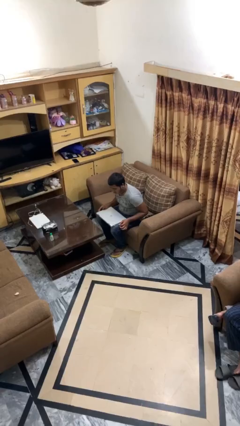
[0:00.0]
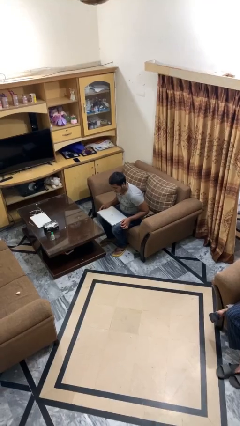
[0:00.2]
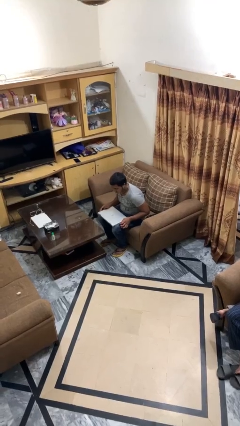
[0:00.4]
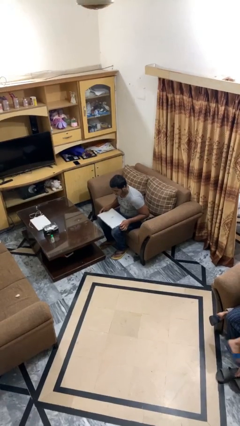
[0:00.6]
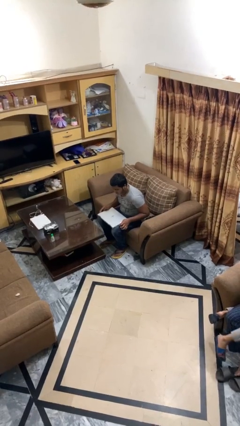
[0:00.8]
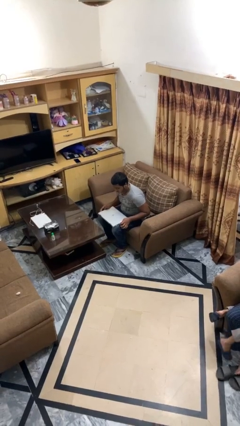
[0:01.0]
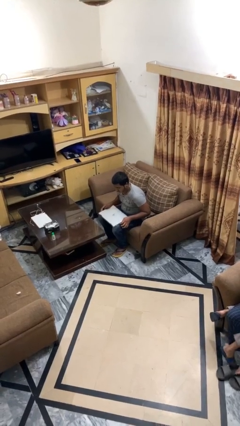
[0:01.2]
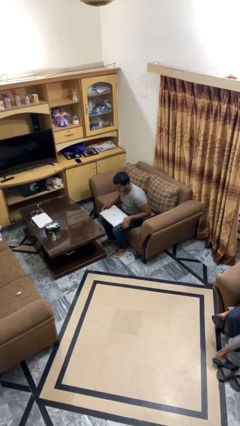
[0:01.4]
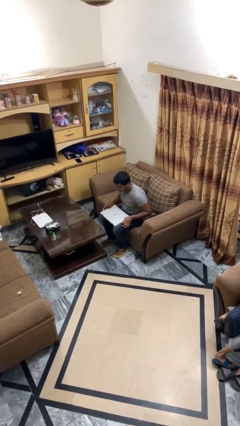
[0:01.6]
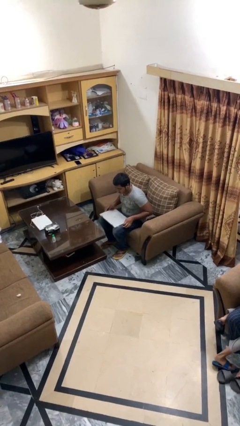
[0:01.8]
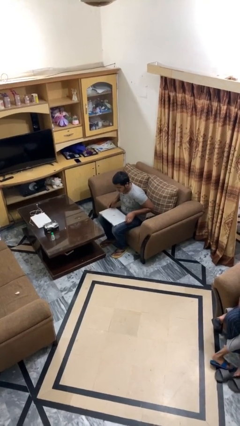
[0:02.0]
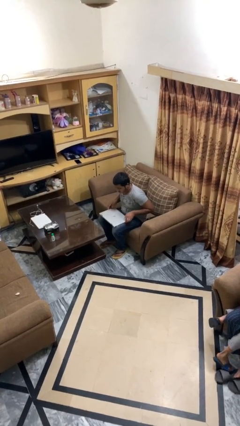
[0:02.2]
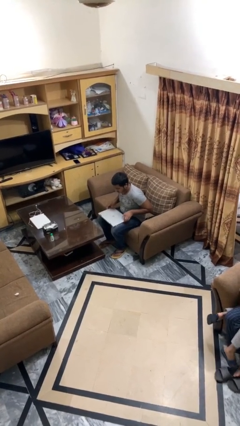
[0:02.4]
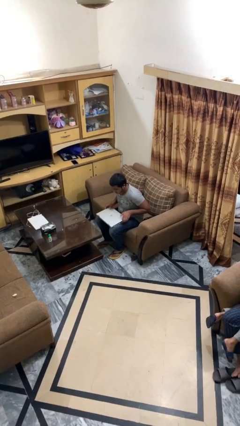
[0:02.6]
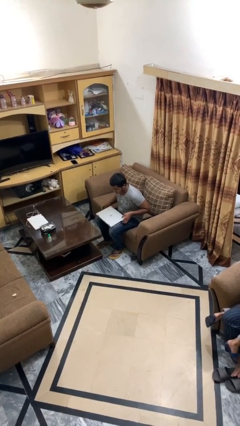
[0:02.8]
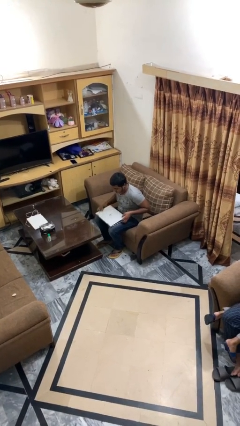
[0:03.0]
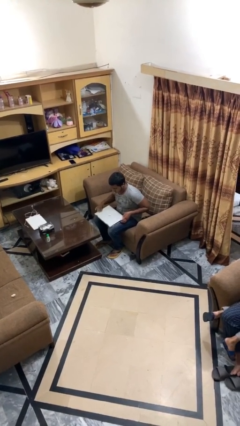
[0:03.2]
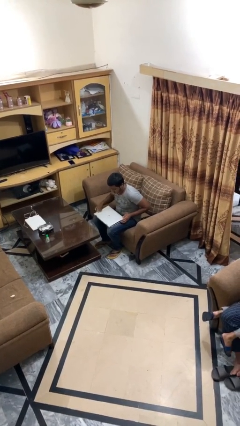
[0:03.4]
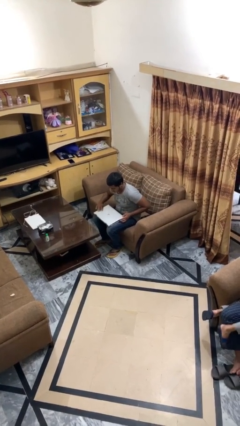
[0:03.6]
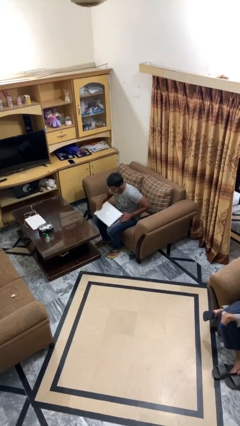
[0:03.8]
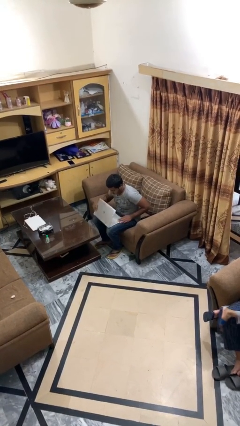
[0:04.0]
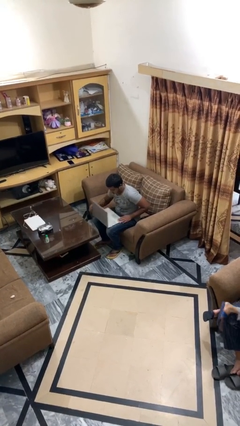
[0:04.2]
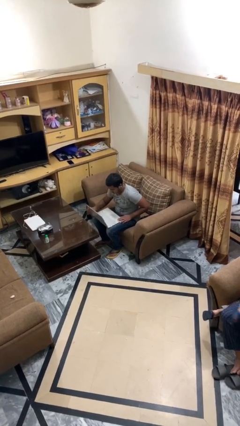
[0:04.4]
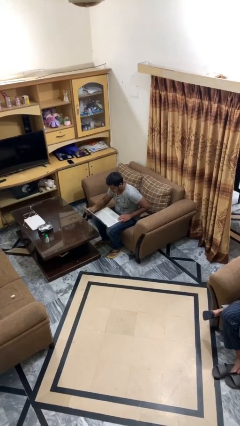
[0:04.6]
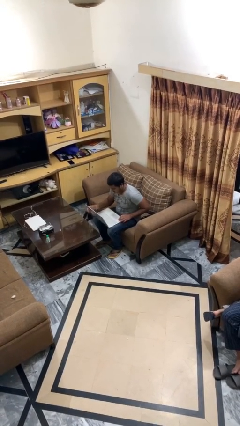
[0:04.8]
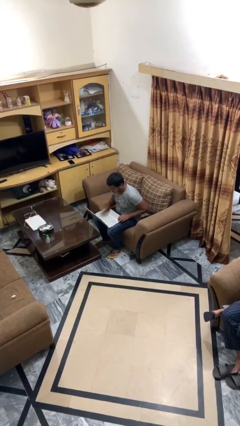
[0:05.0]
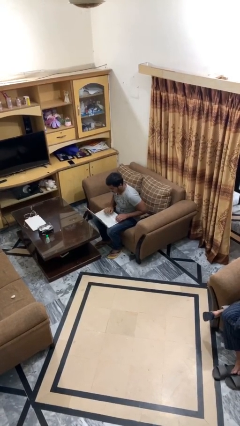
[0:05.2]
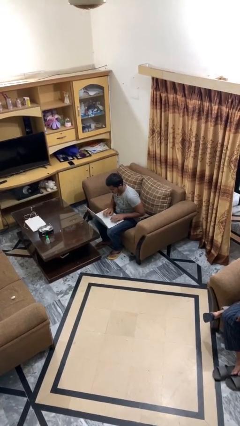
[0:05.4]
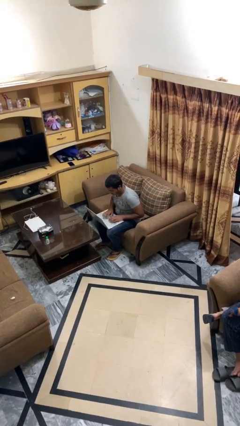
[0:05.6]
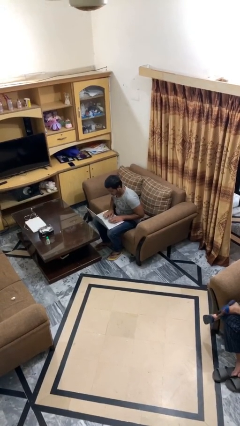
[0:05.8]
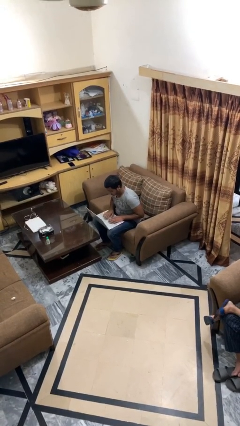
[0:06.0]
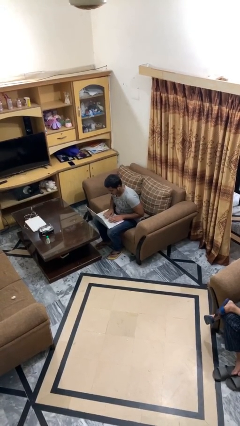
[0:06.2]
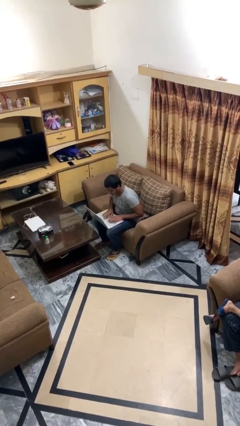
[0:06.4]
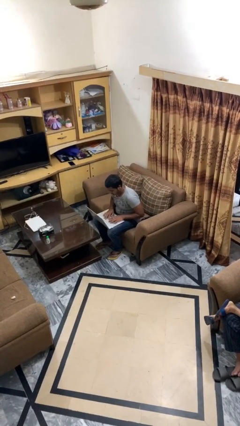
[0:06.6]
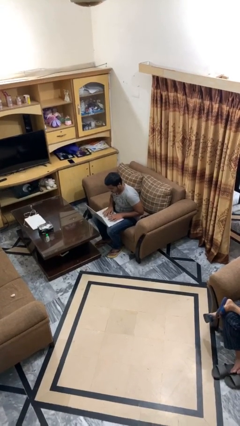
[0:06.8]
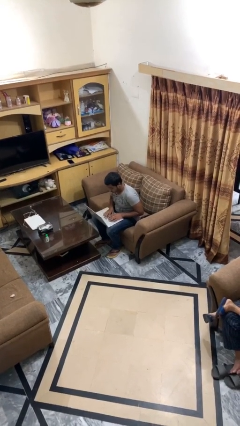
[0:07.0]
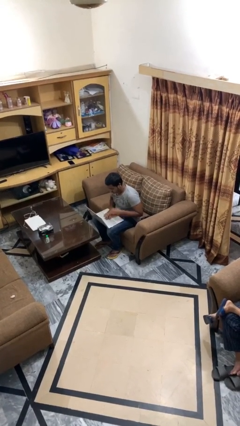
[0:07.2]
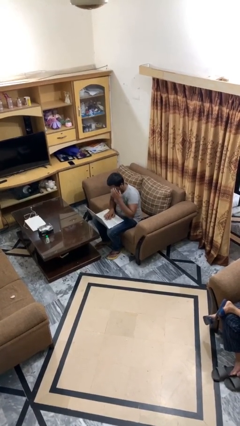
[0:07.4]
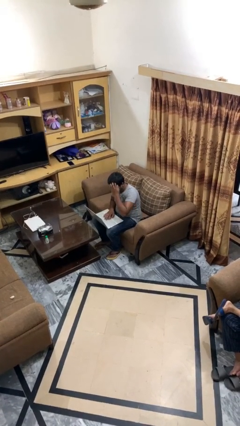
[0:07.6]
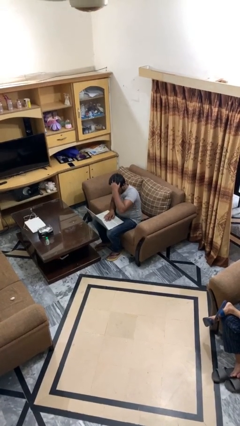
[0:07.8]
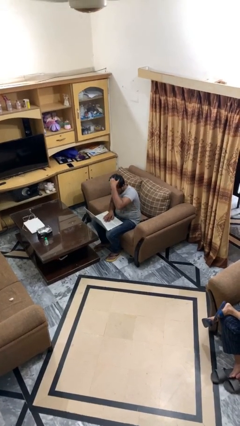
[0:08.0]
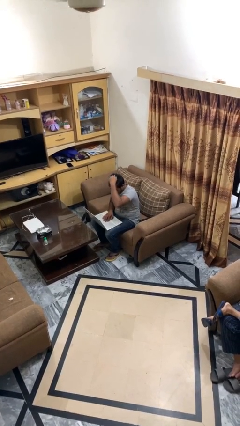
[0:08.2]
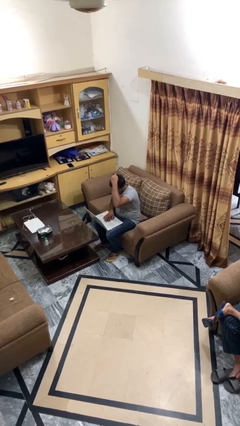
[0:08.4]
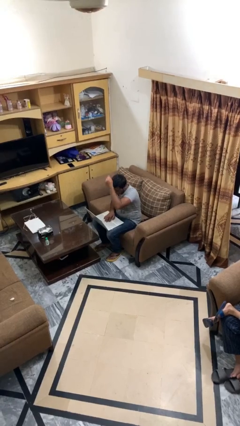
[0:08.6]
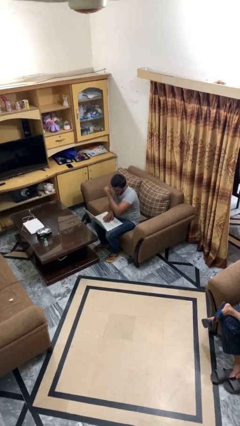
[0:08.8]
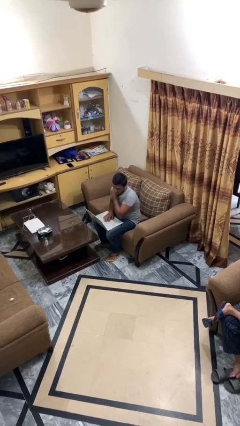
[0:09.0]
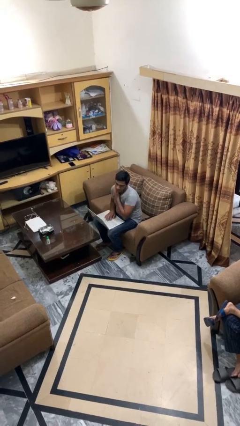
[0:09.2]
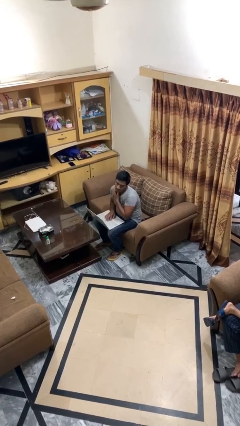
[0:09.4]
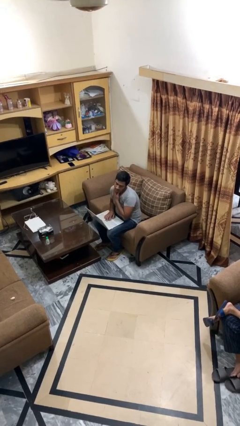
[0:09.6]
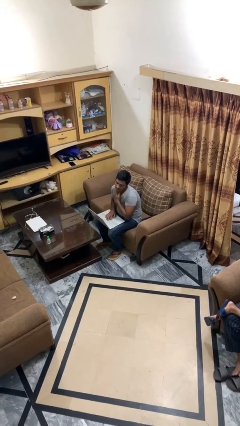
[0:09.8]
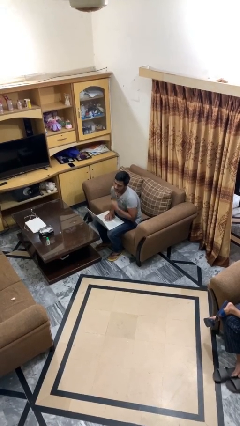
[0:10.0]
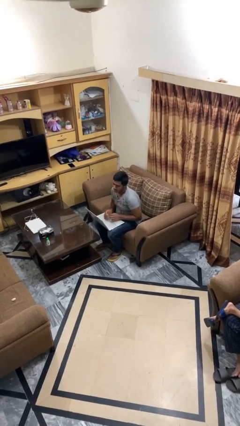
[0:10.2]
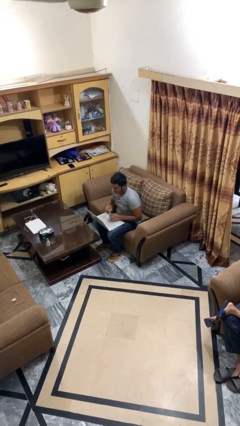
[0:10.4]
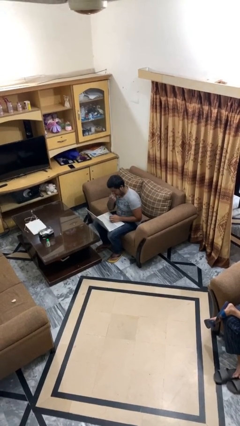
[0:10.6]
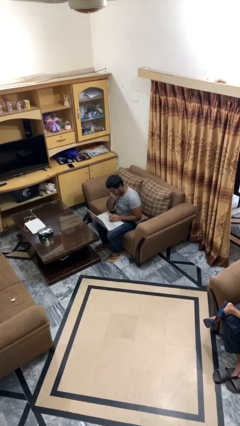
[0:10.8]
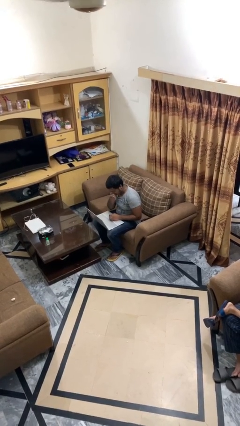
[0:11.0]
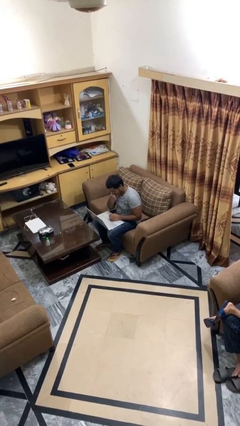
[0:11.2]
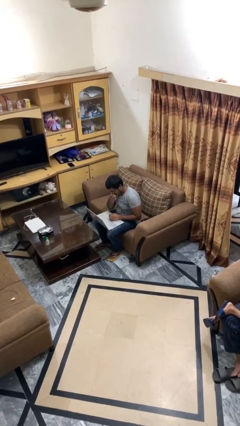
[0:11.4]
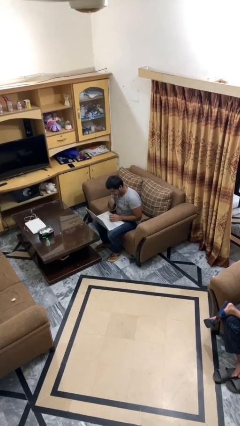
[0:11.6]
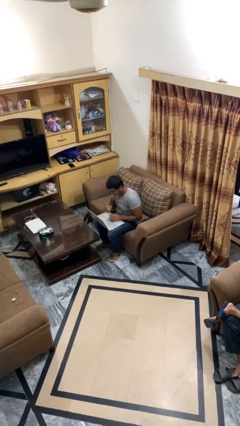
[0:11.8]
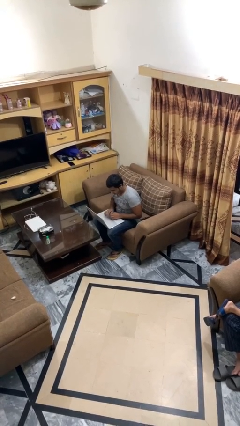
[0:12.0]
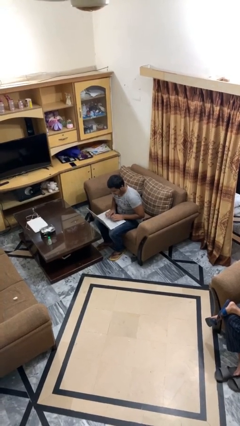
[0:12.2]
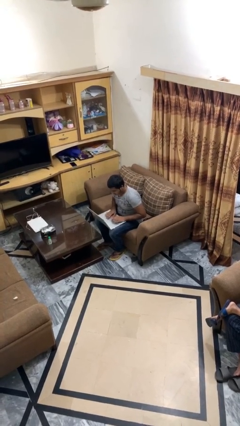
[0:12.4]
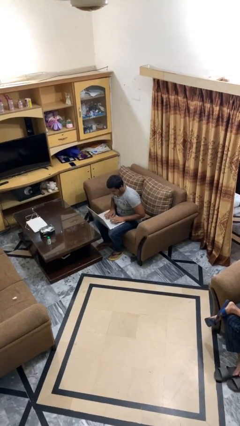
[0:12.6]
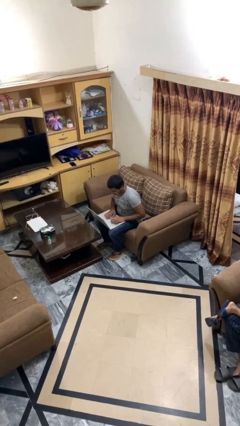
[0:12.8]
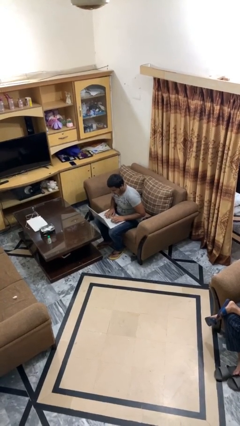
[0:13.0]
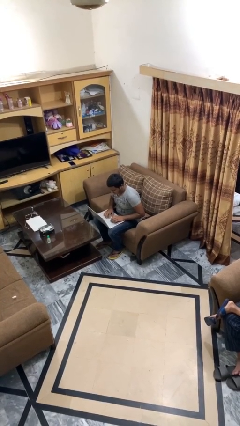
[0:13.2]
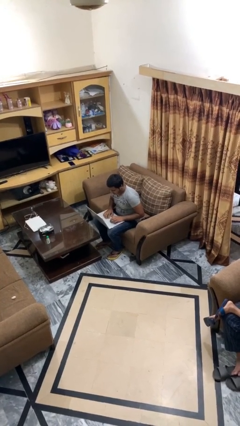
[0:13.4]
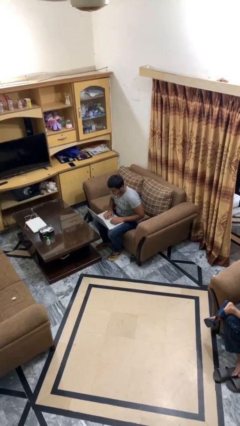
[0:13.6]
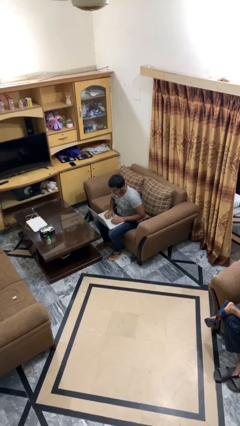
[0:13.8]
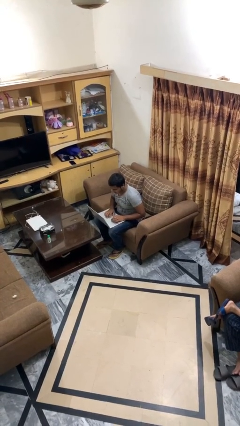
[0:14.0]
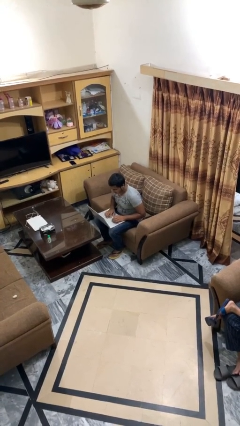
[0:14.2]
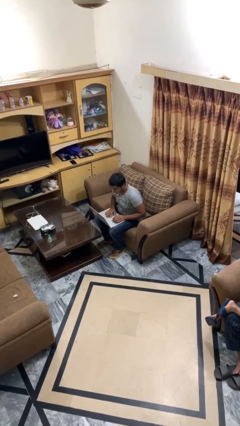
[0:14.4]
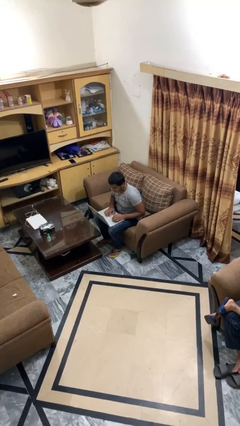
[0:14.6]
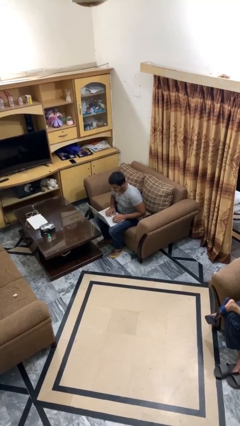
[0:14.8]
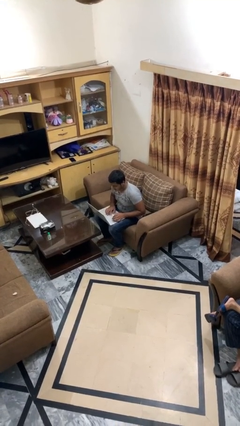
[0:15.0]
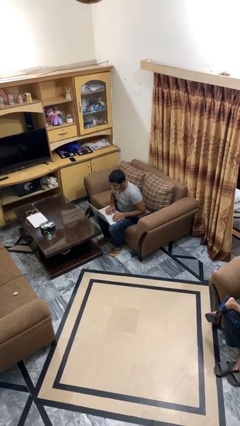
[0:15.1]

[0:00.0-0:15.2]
person interacts with laptop

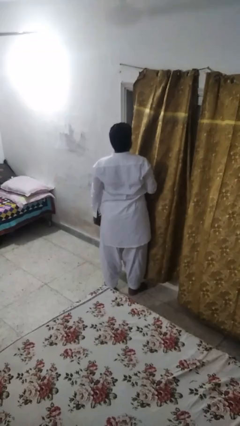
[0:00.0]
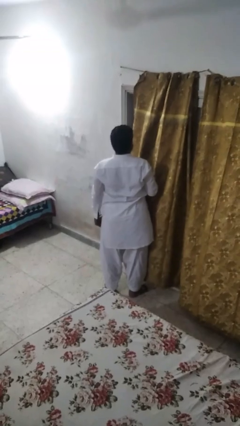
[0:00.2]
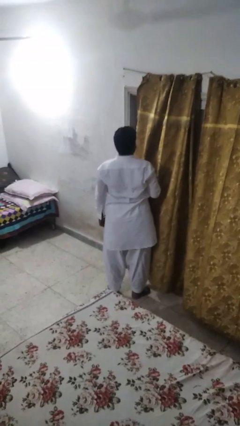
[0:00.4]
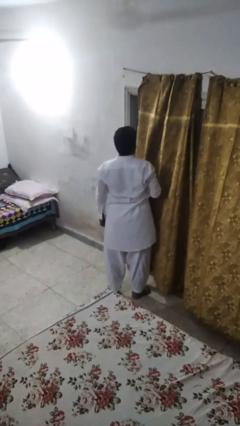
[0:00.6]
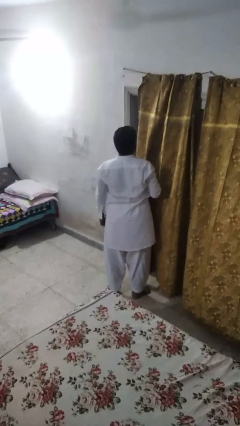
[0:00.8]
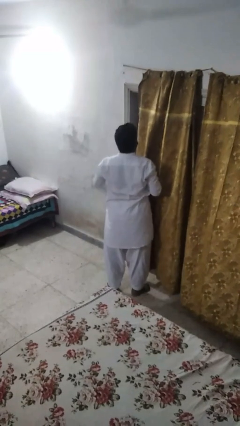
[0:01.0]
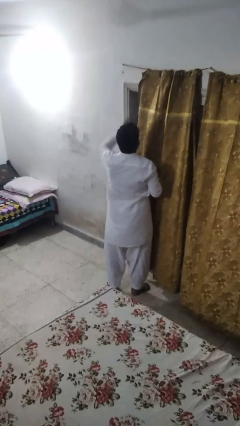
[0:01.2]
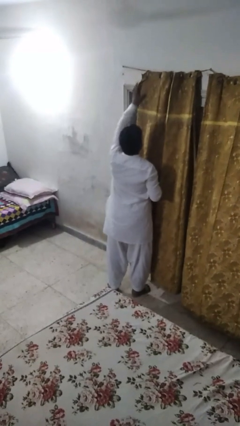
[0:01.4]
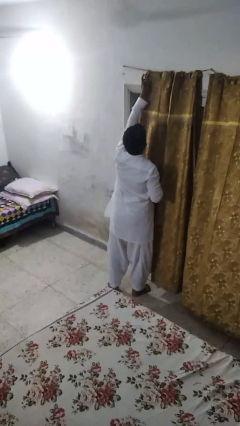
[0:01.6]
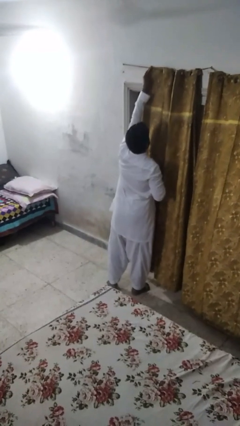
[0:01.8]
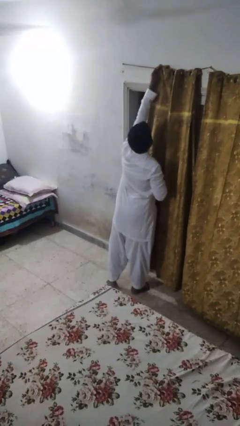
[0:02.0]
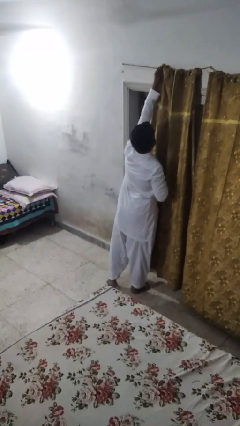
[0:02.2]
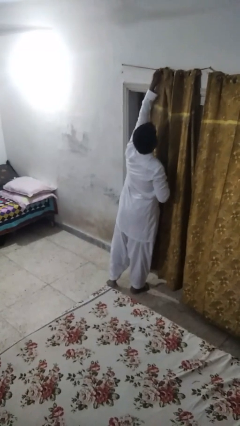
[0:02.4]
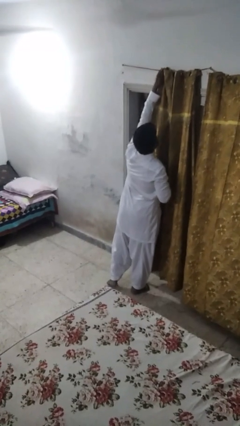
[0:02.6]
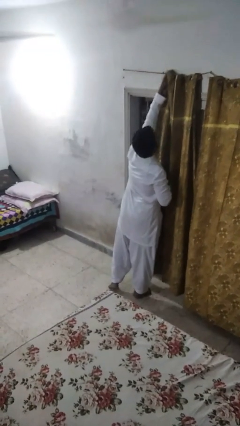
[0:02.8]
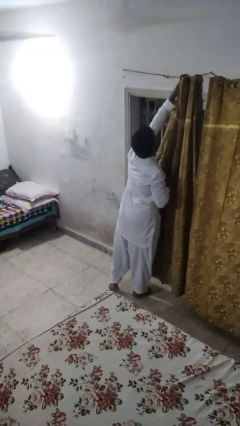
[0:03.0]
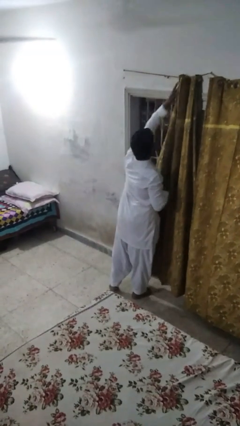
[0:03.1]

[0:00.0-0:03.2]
person opens curtains
